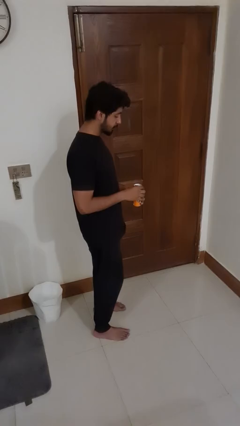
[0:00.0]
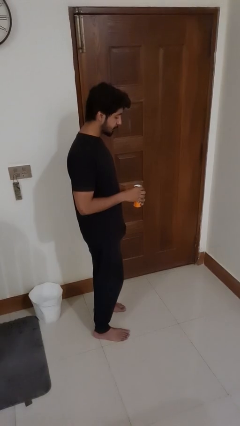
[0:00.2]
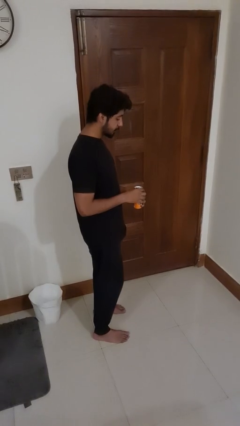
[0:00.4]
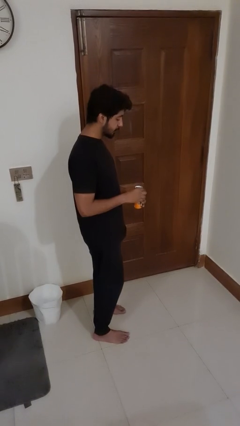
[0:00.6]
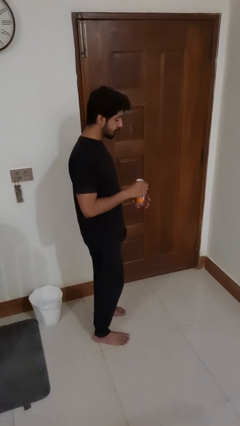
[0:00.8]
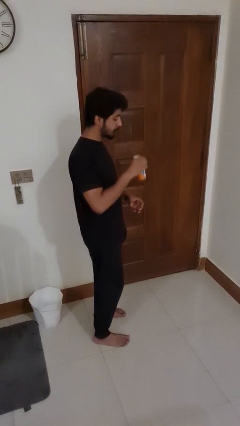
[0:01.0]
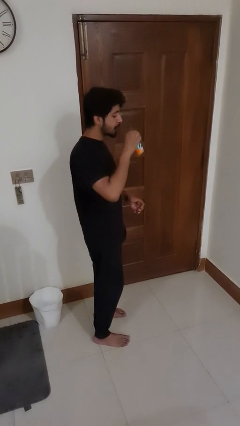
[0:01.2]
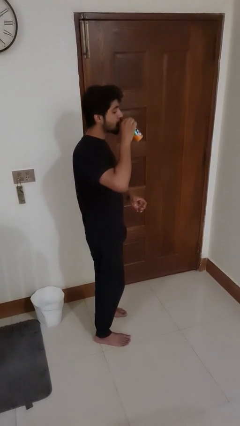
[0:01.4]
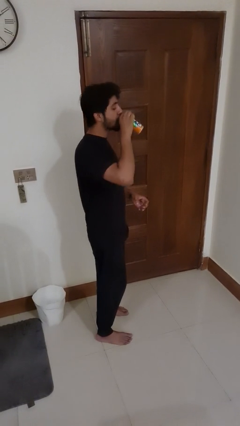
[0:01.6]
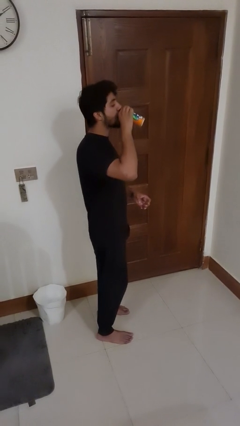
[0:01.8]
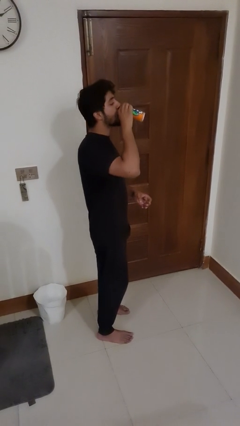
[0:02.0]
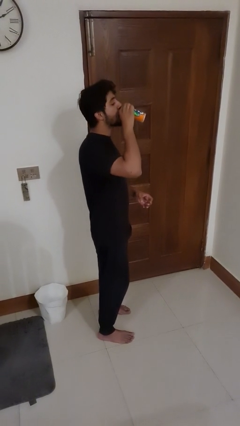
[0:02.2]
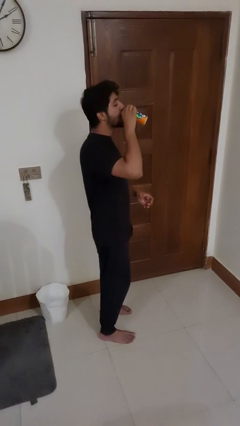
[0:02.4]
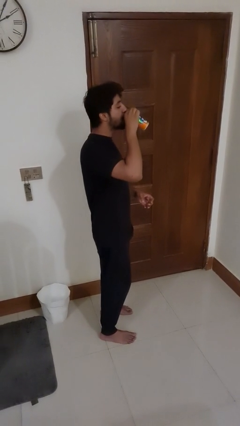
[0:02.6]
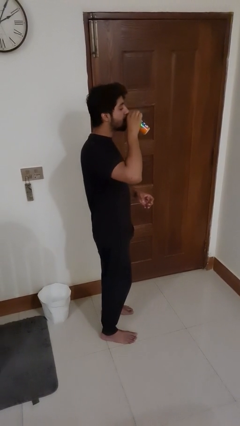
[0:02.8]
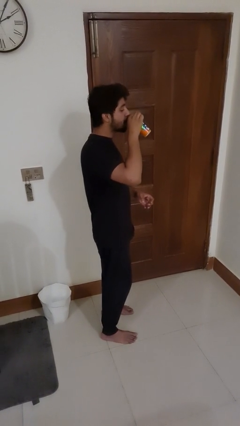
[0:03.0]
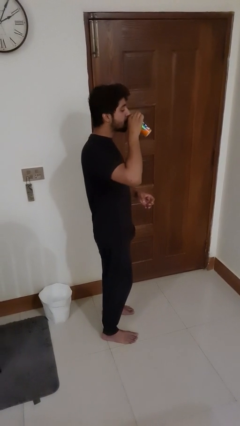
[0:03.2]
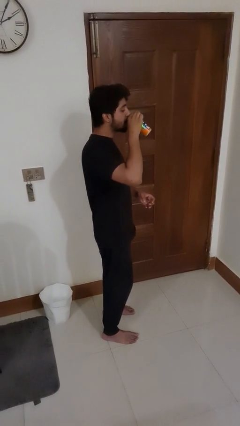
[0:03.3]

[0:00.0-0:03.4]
person drinks from beverage can

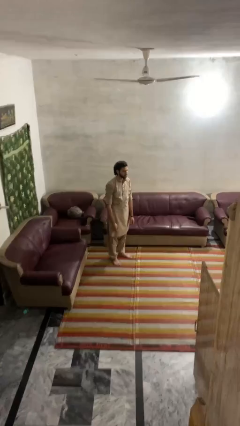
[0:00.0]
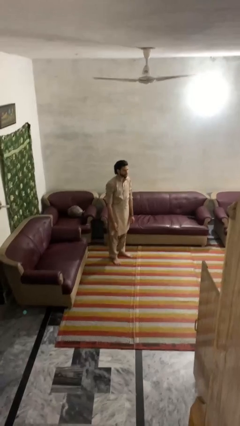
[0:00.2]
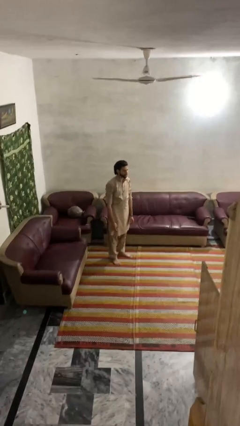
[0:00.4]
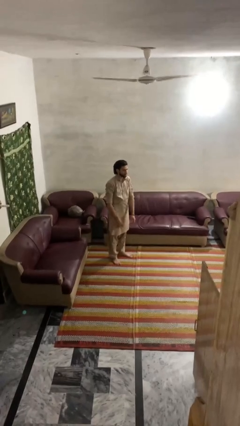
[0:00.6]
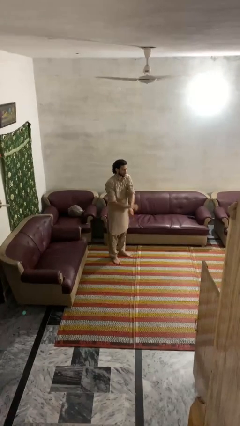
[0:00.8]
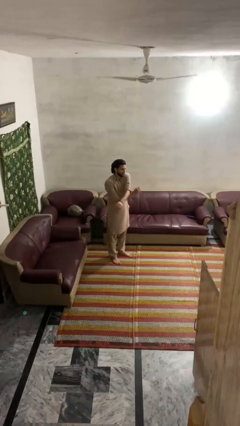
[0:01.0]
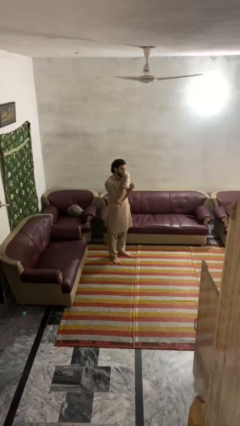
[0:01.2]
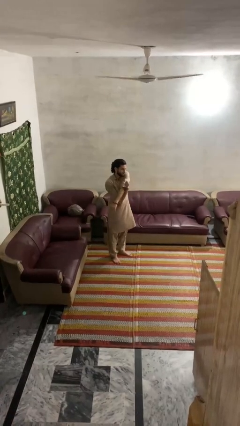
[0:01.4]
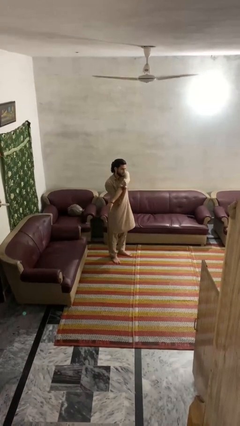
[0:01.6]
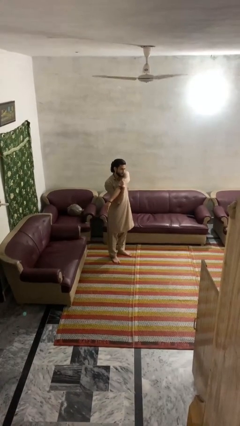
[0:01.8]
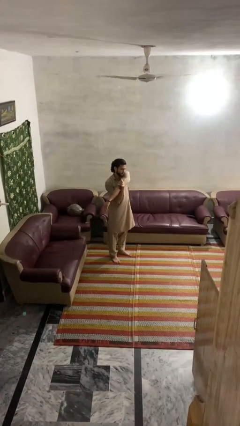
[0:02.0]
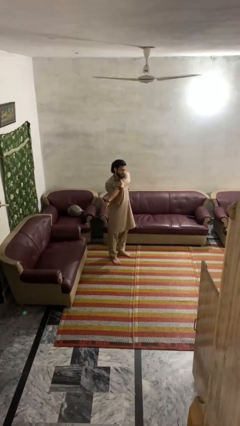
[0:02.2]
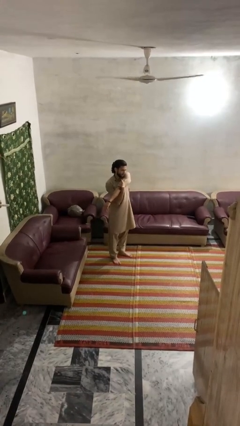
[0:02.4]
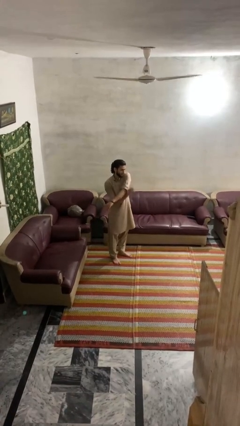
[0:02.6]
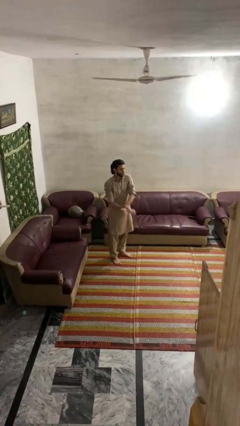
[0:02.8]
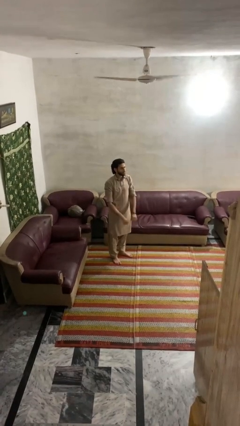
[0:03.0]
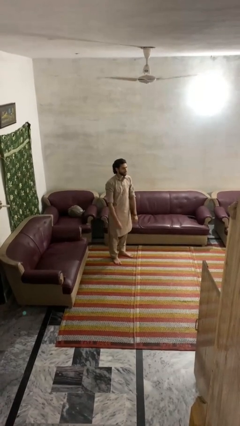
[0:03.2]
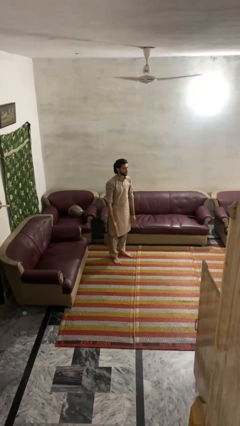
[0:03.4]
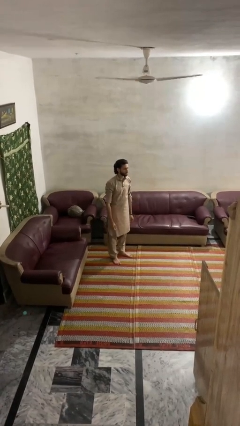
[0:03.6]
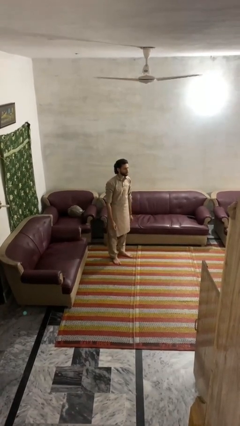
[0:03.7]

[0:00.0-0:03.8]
person stretches arms to side

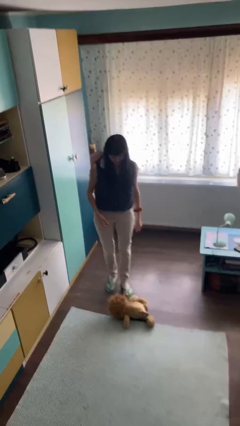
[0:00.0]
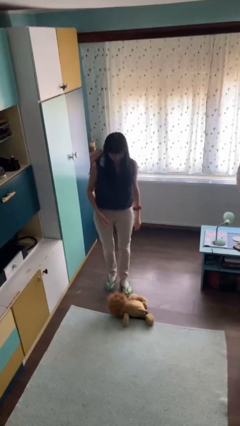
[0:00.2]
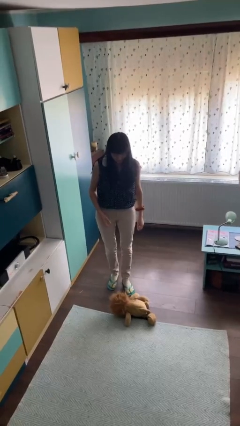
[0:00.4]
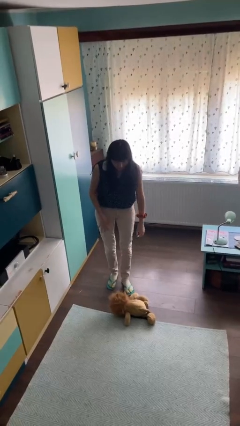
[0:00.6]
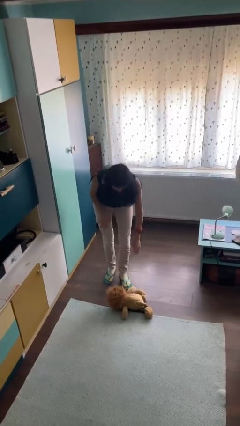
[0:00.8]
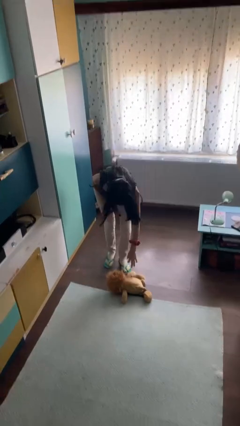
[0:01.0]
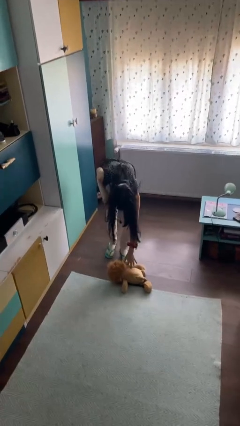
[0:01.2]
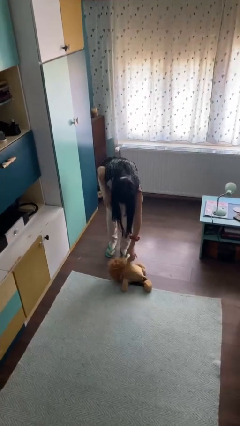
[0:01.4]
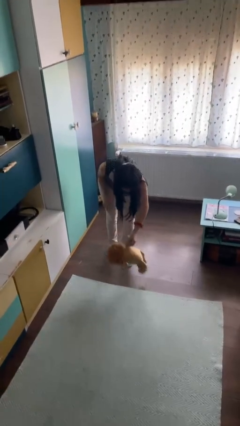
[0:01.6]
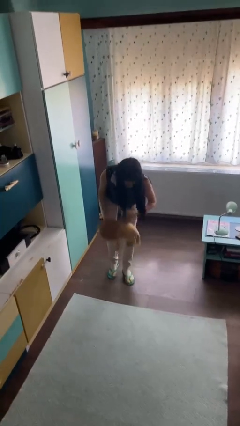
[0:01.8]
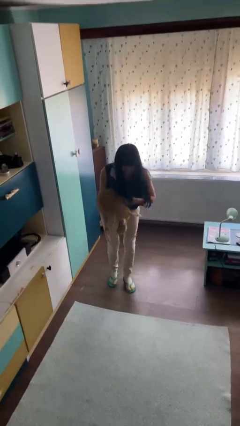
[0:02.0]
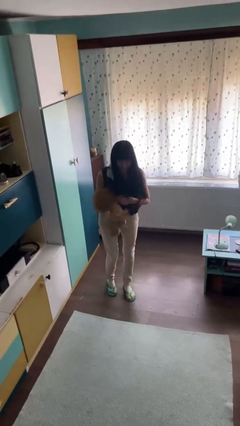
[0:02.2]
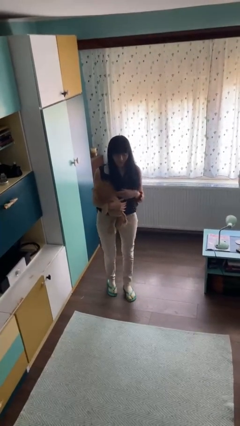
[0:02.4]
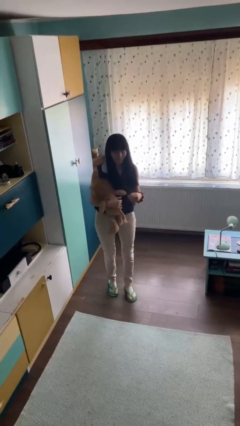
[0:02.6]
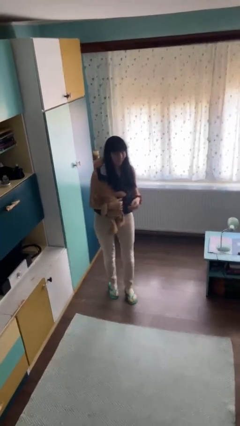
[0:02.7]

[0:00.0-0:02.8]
person picks up object from floor

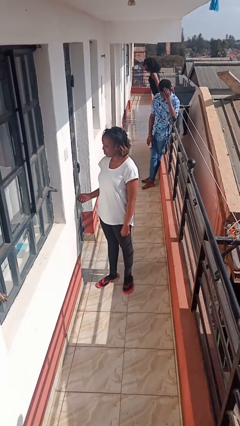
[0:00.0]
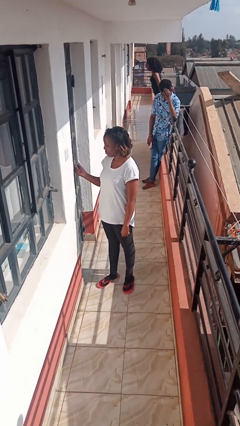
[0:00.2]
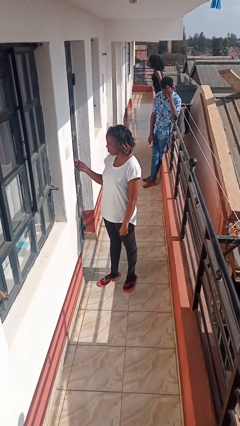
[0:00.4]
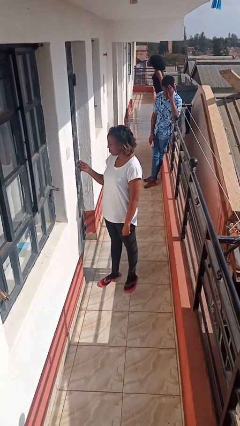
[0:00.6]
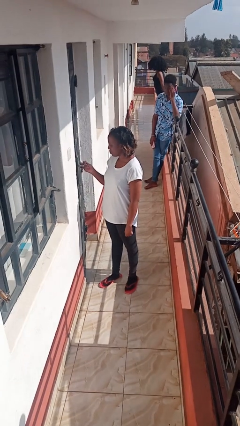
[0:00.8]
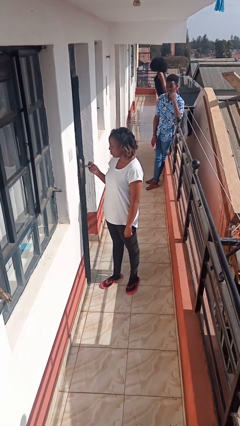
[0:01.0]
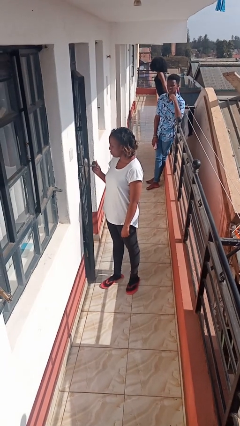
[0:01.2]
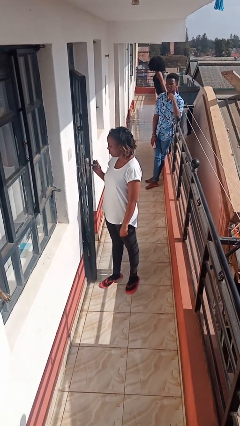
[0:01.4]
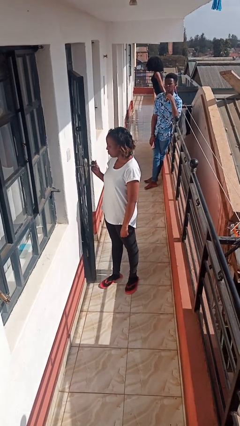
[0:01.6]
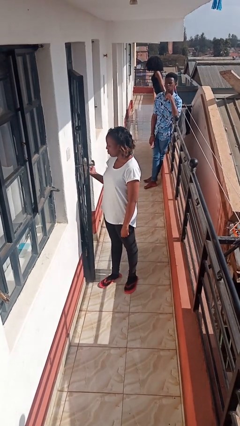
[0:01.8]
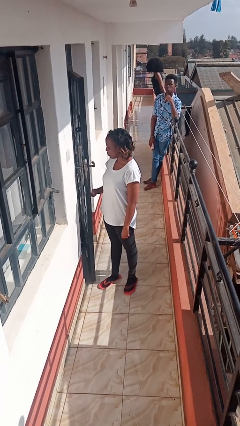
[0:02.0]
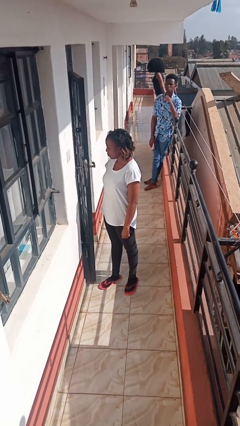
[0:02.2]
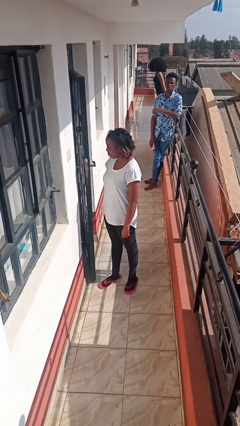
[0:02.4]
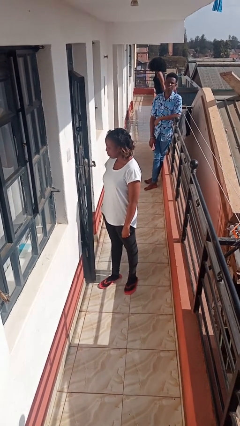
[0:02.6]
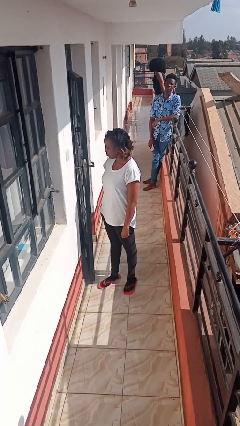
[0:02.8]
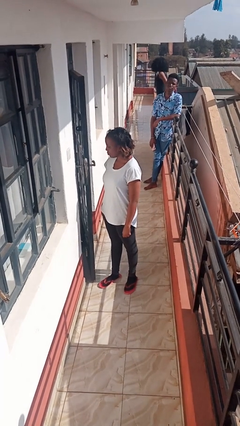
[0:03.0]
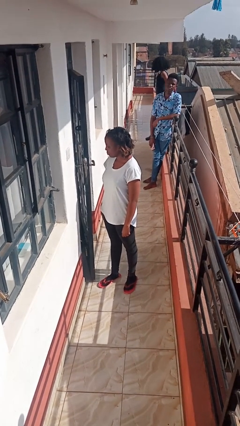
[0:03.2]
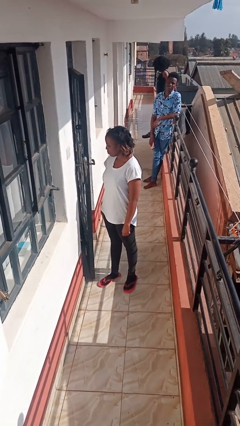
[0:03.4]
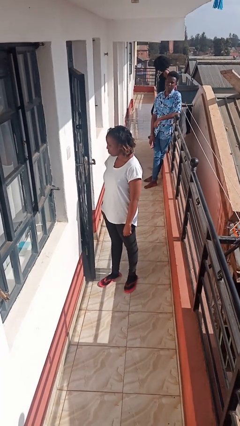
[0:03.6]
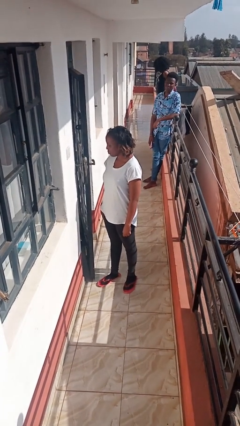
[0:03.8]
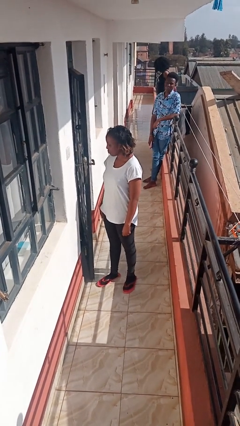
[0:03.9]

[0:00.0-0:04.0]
person opens facility door

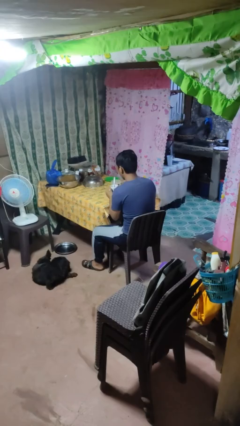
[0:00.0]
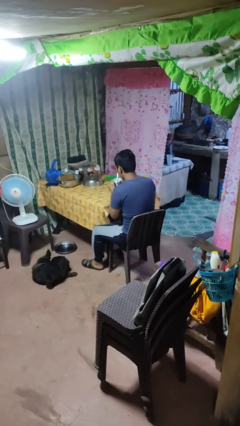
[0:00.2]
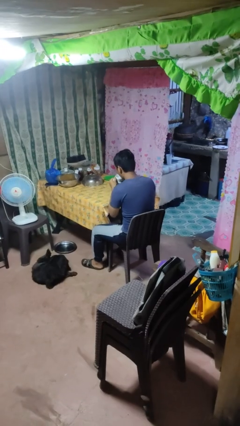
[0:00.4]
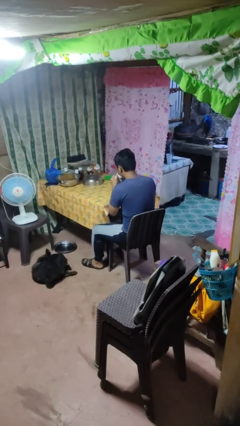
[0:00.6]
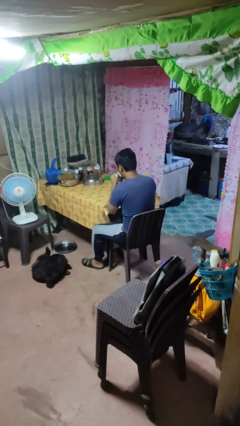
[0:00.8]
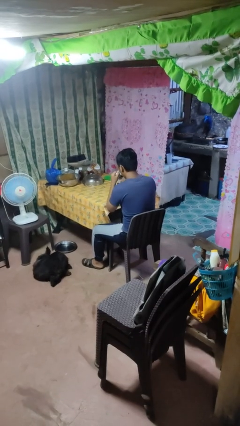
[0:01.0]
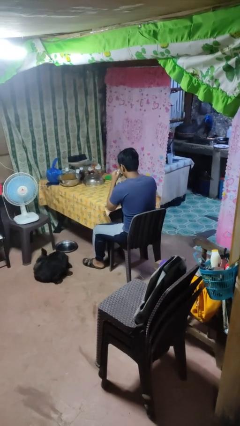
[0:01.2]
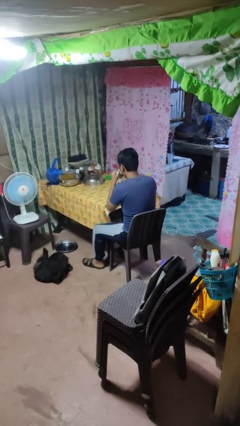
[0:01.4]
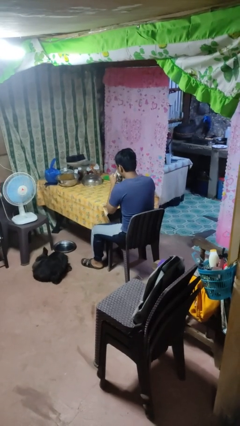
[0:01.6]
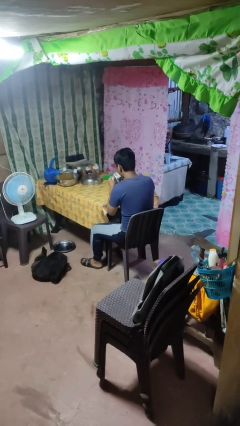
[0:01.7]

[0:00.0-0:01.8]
person drinks from mug

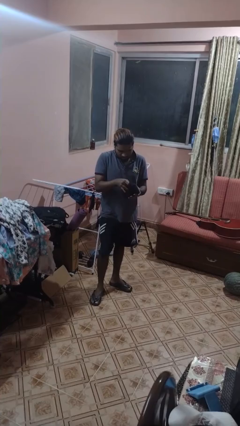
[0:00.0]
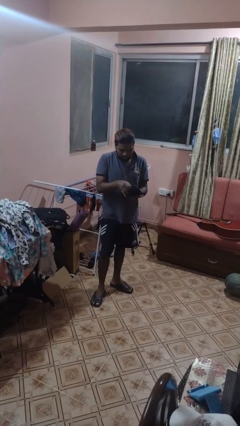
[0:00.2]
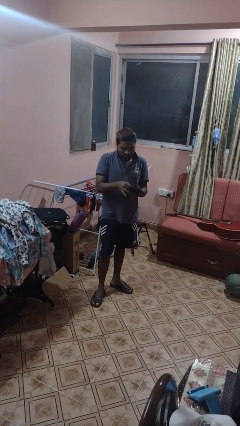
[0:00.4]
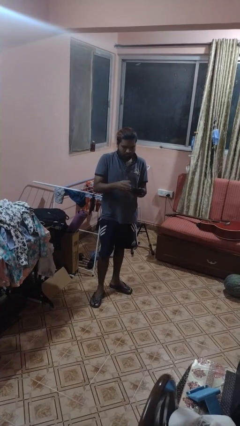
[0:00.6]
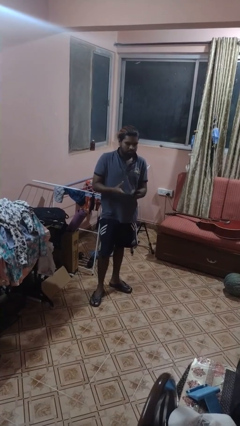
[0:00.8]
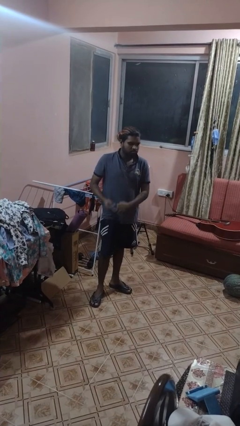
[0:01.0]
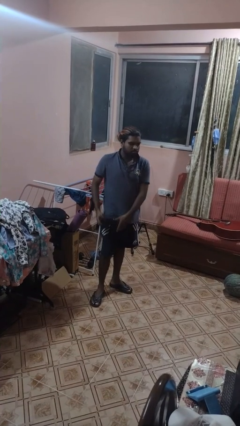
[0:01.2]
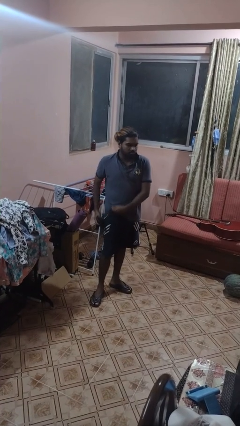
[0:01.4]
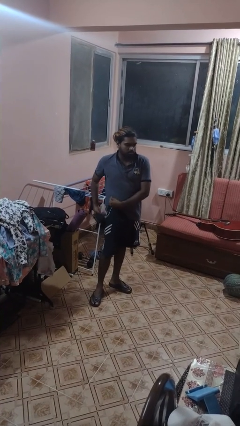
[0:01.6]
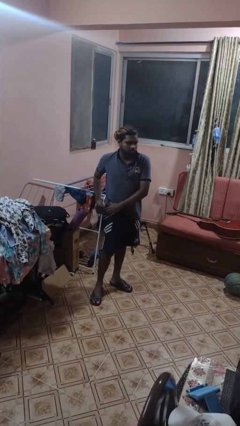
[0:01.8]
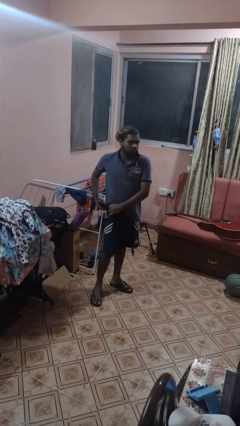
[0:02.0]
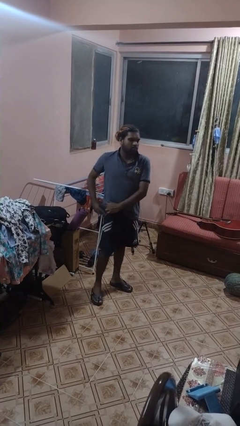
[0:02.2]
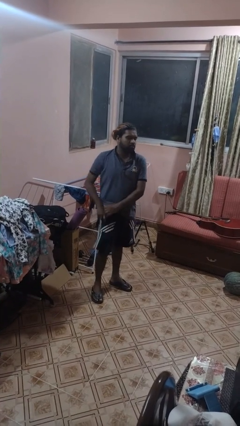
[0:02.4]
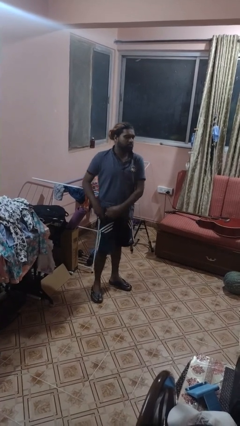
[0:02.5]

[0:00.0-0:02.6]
person puts object into purse
